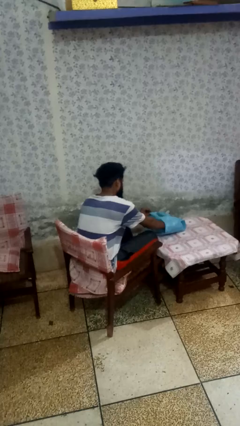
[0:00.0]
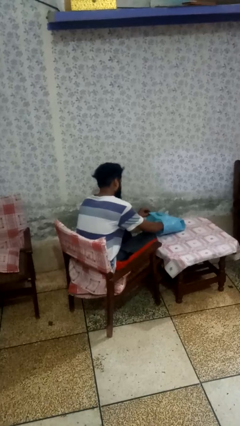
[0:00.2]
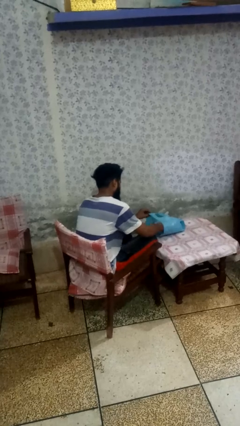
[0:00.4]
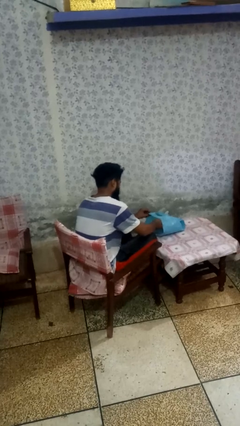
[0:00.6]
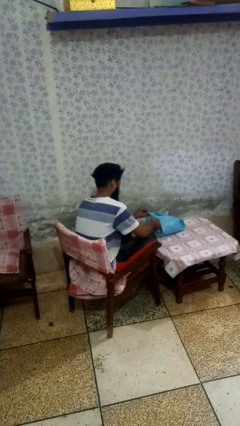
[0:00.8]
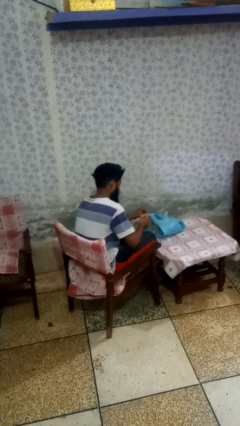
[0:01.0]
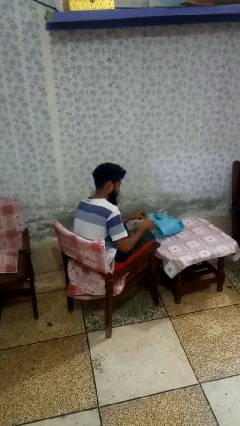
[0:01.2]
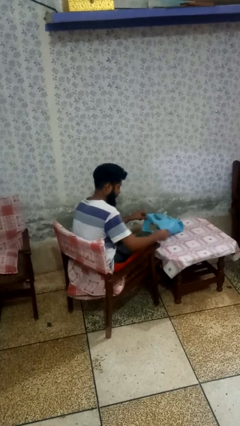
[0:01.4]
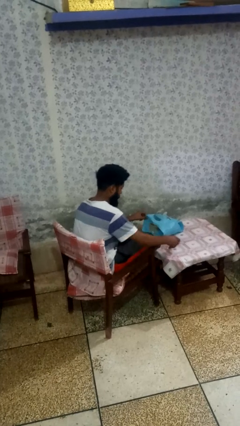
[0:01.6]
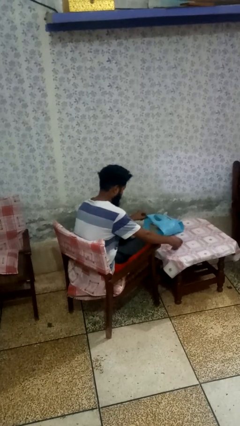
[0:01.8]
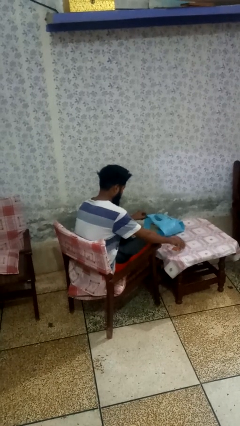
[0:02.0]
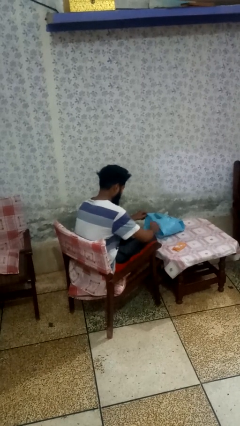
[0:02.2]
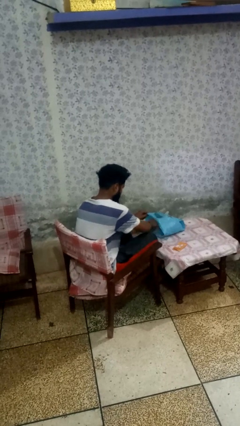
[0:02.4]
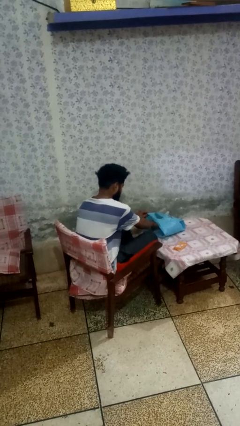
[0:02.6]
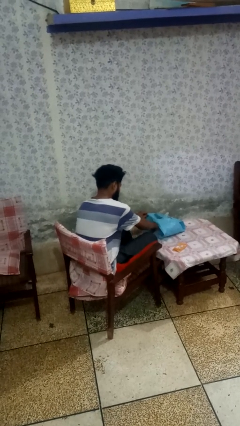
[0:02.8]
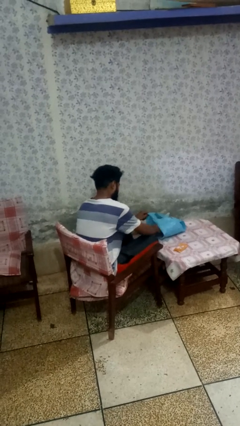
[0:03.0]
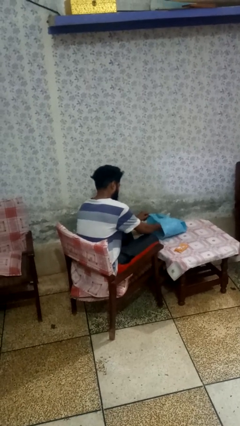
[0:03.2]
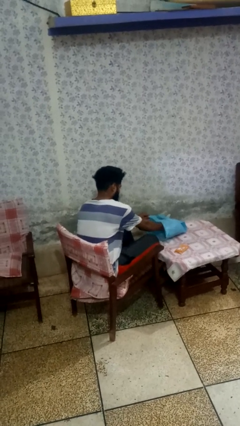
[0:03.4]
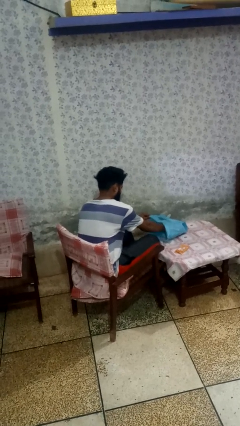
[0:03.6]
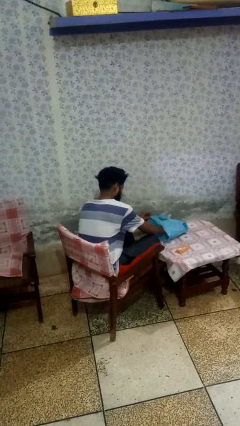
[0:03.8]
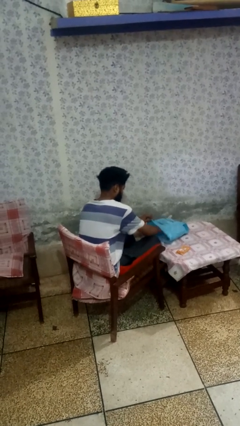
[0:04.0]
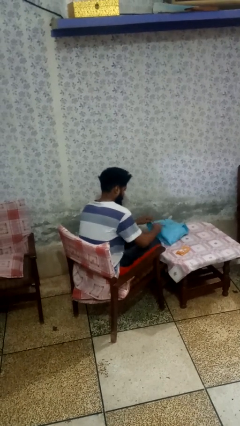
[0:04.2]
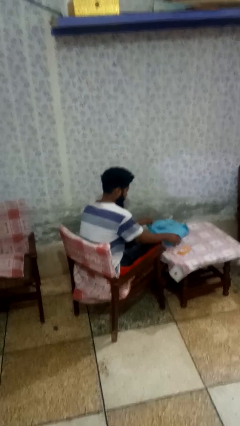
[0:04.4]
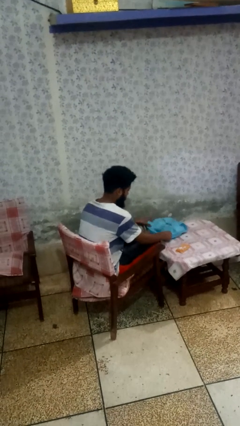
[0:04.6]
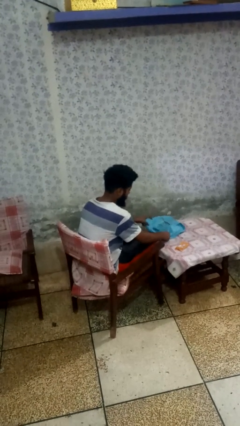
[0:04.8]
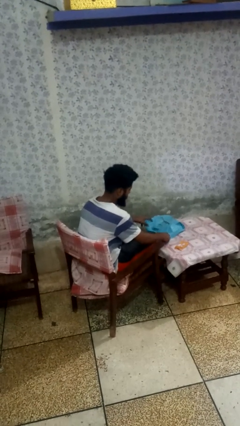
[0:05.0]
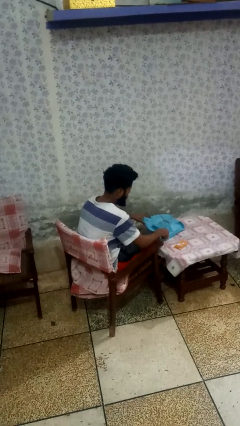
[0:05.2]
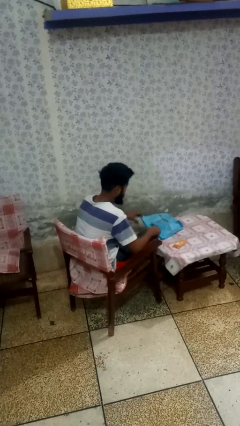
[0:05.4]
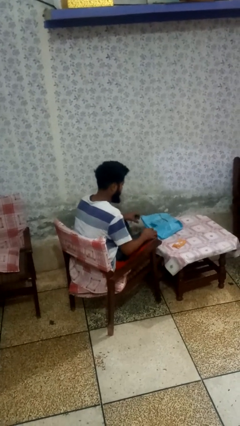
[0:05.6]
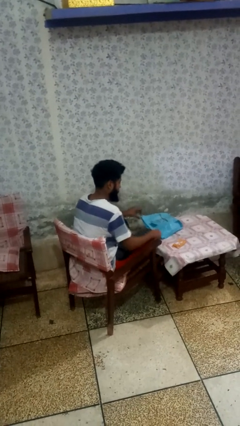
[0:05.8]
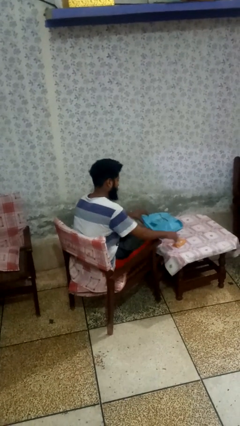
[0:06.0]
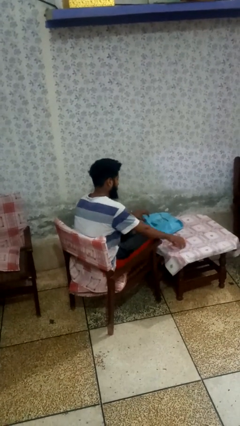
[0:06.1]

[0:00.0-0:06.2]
person takes object from bag

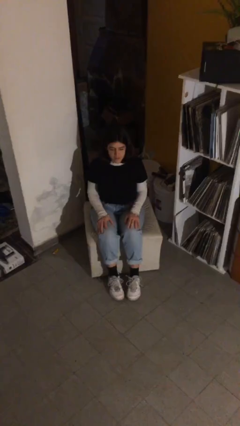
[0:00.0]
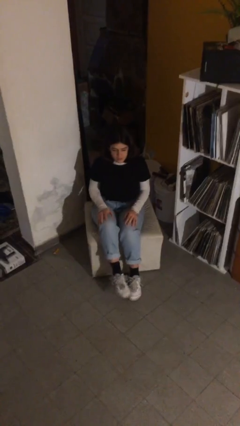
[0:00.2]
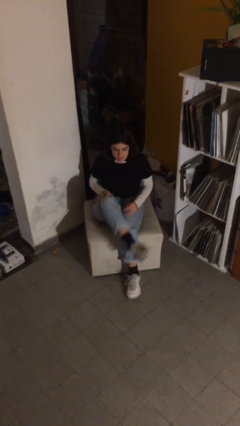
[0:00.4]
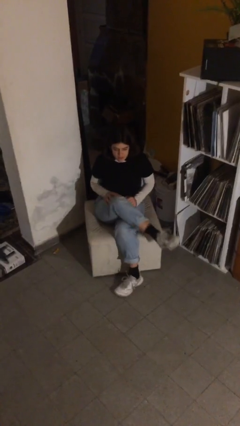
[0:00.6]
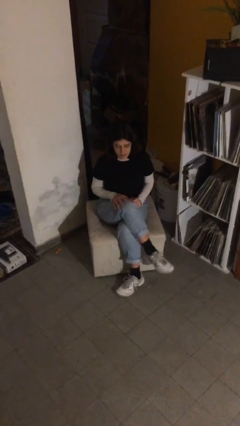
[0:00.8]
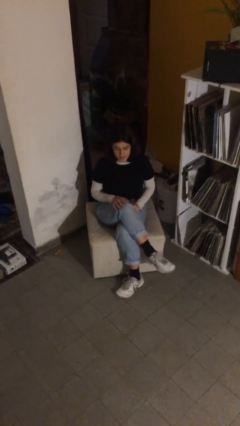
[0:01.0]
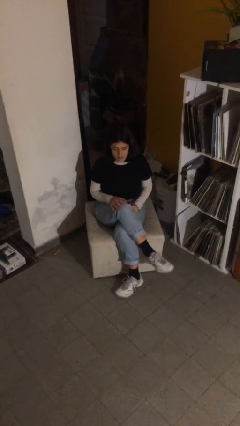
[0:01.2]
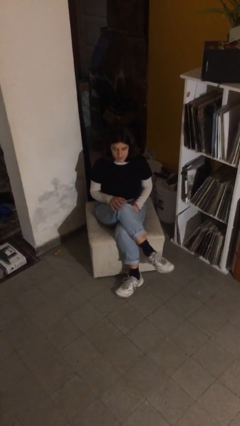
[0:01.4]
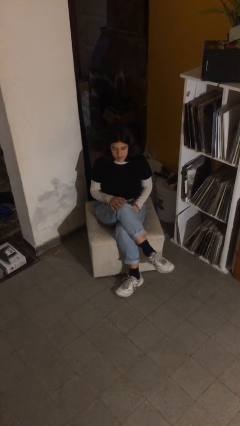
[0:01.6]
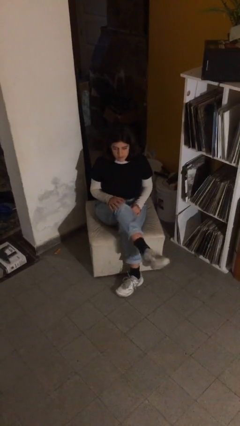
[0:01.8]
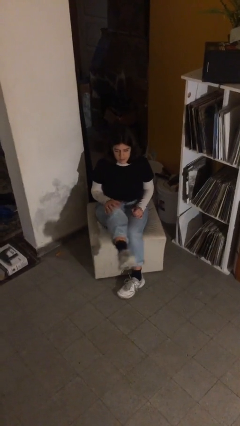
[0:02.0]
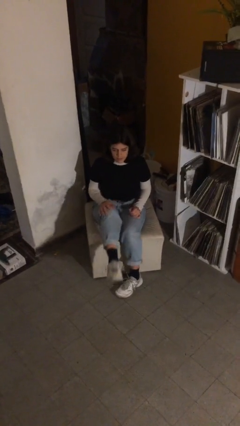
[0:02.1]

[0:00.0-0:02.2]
person crosses legs

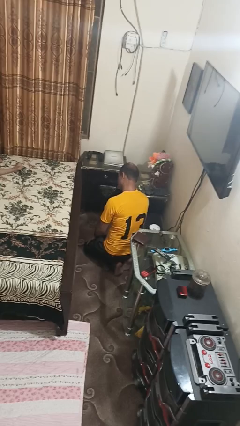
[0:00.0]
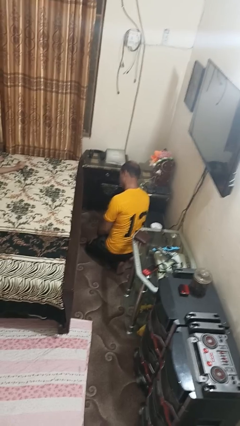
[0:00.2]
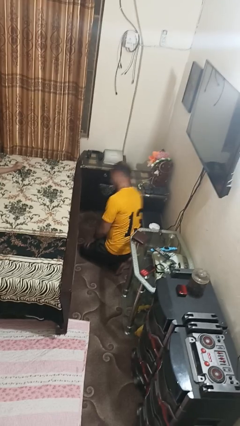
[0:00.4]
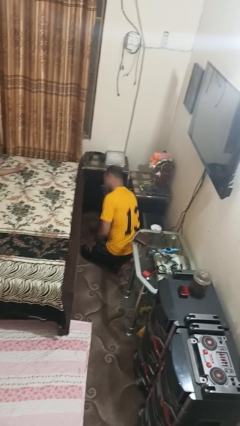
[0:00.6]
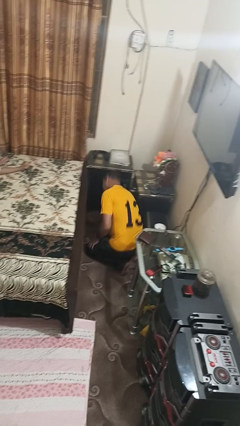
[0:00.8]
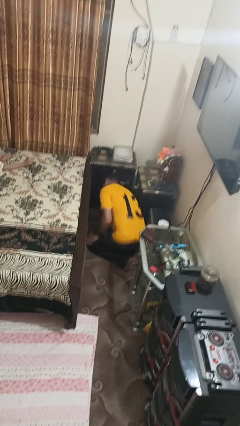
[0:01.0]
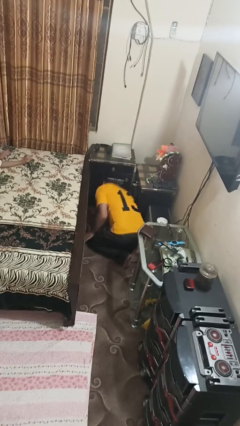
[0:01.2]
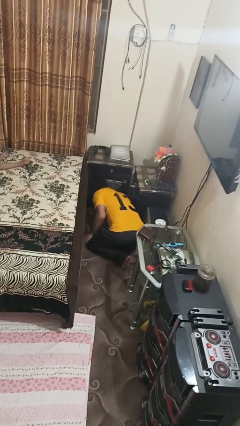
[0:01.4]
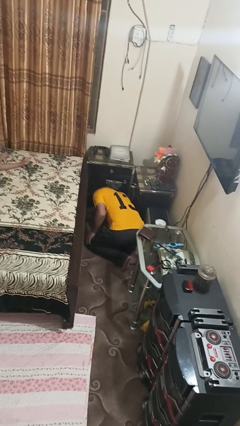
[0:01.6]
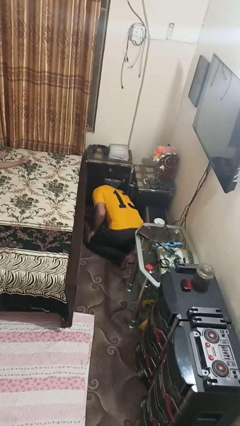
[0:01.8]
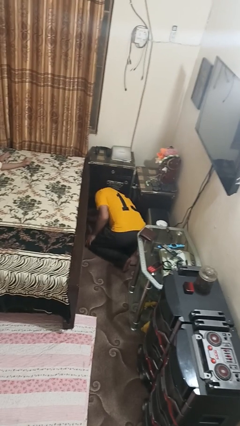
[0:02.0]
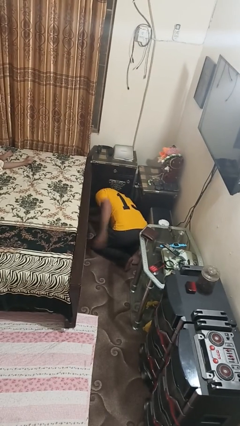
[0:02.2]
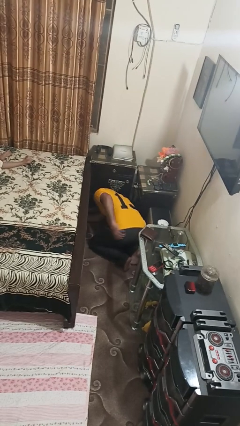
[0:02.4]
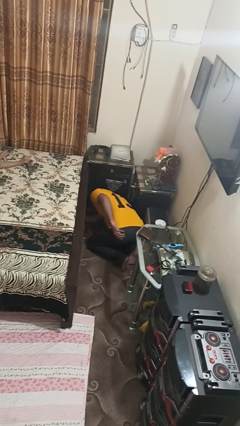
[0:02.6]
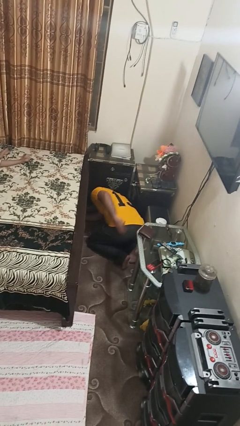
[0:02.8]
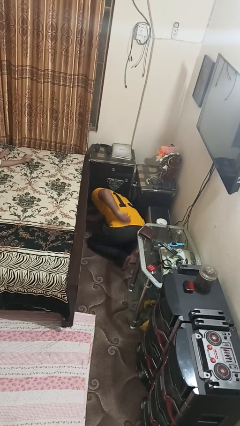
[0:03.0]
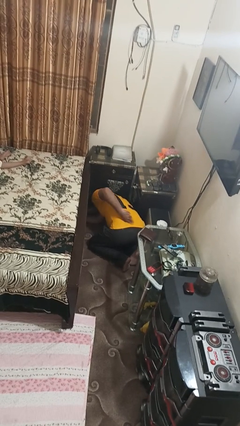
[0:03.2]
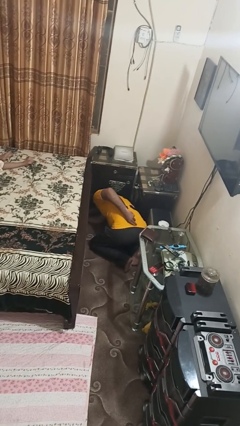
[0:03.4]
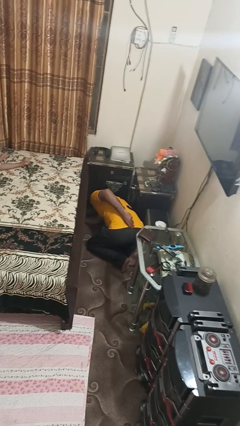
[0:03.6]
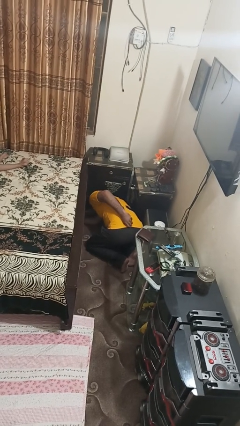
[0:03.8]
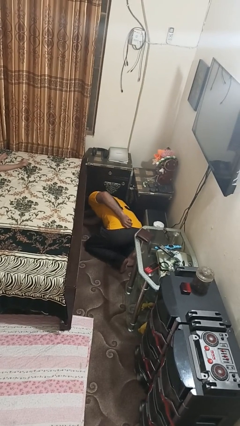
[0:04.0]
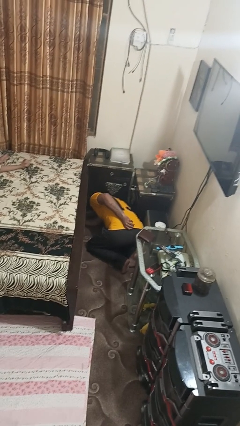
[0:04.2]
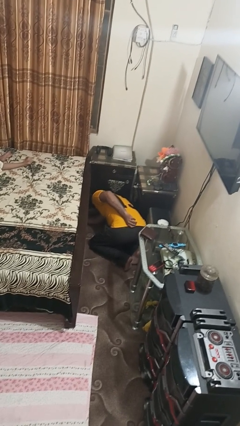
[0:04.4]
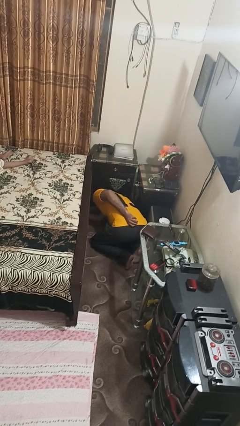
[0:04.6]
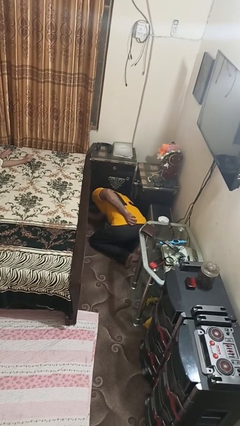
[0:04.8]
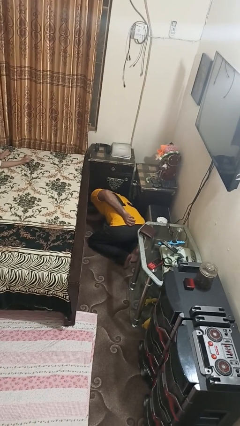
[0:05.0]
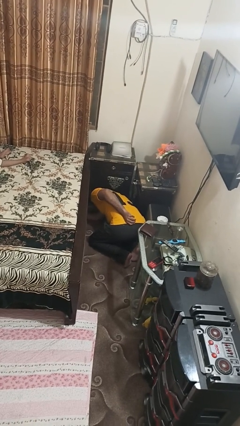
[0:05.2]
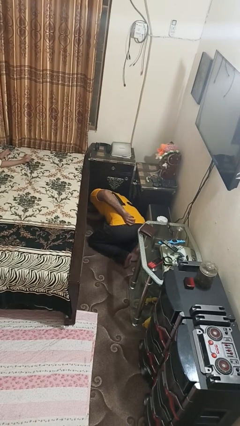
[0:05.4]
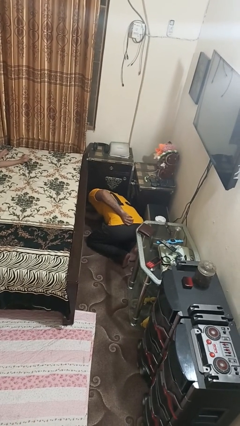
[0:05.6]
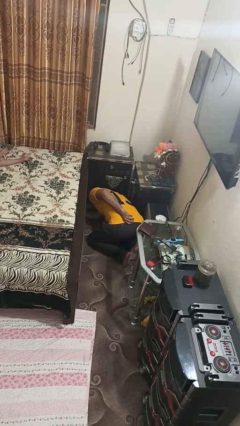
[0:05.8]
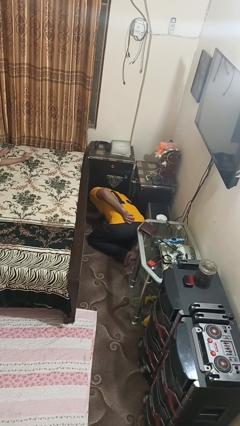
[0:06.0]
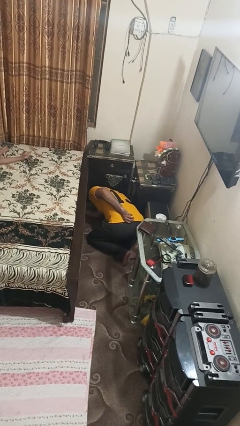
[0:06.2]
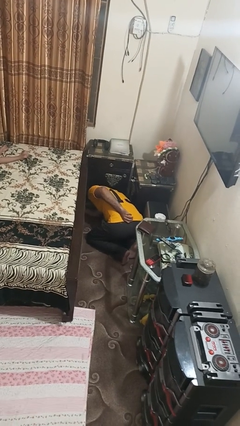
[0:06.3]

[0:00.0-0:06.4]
person searches under bed

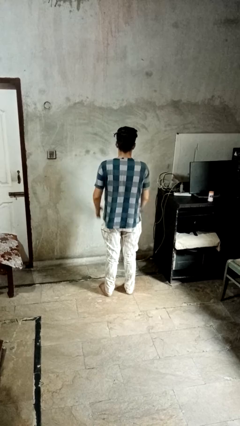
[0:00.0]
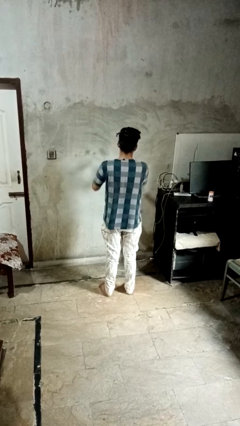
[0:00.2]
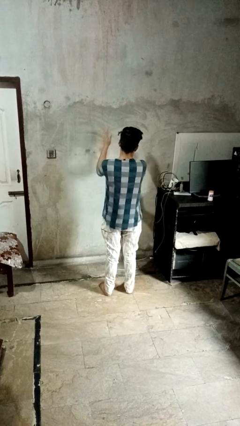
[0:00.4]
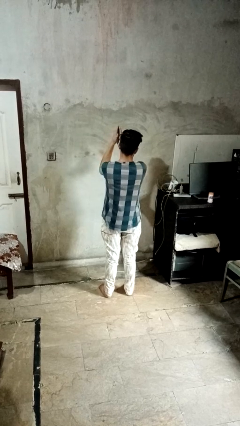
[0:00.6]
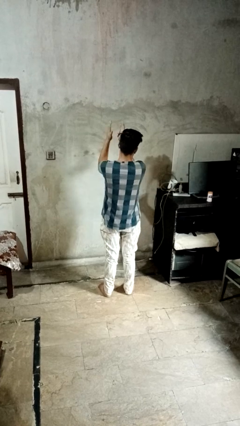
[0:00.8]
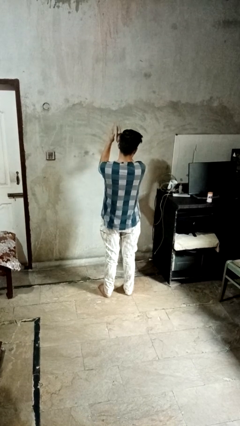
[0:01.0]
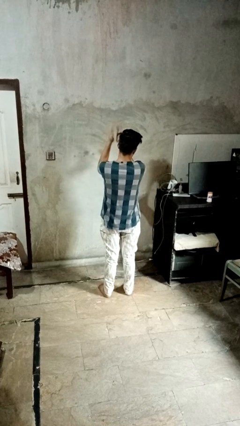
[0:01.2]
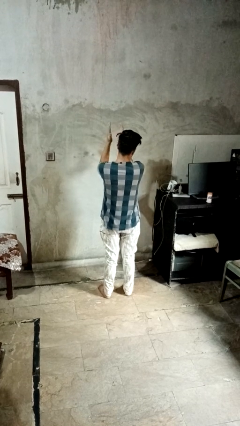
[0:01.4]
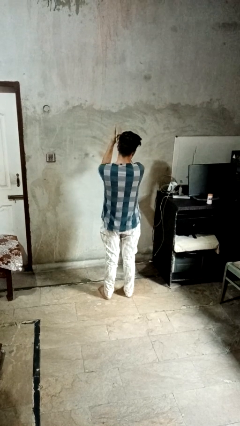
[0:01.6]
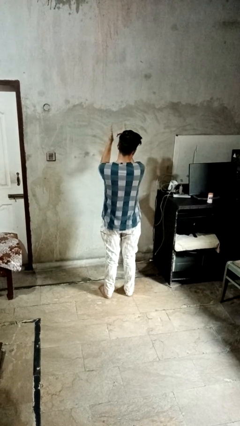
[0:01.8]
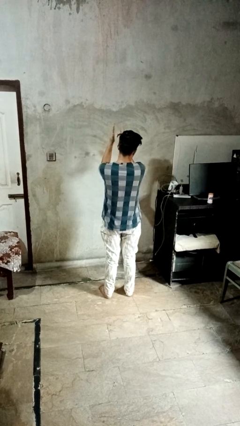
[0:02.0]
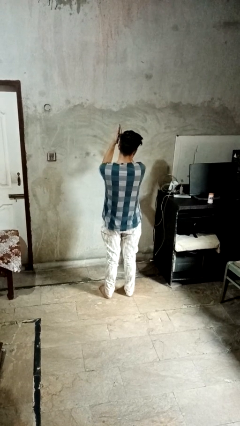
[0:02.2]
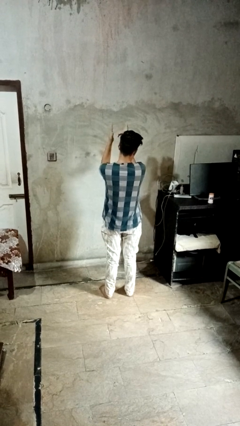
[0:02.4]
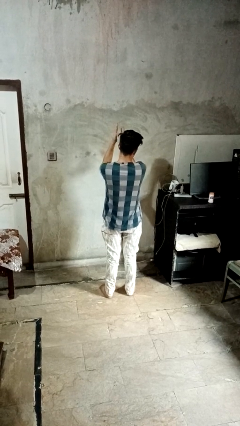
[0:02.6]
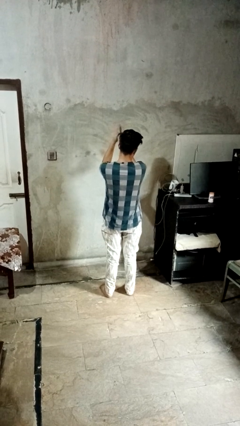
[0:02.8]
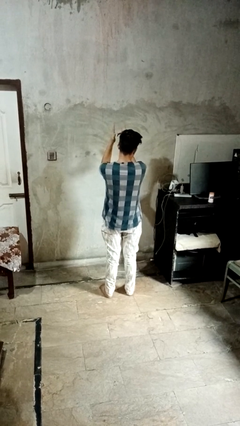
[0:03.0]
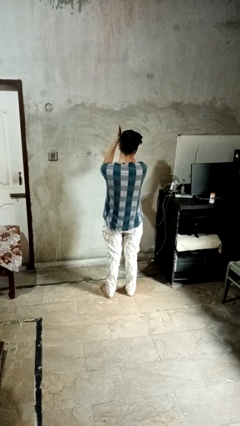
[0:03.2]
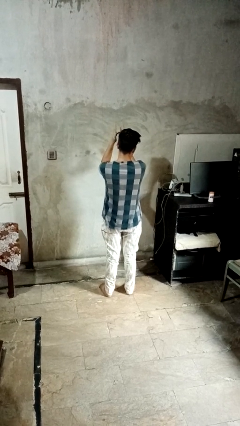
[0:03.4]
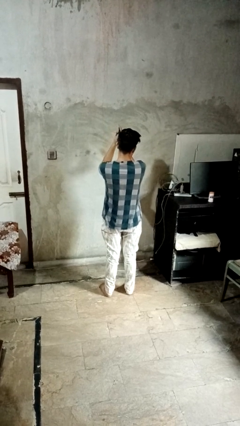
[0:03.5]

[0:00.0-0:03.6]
person claps hands
